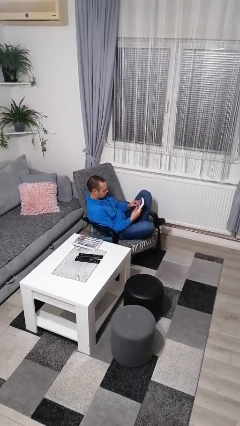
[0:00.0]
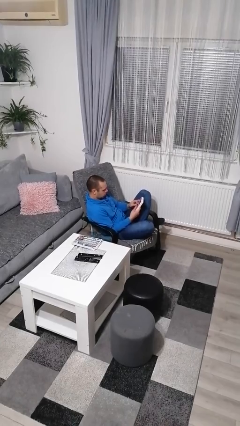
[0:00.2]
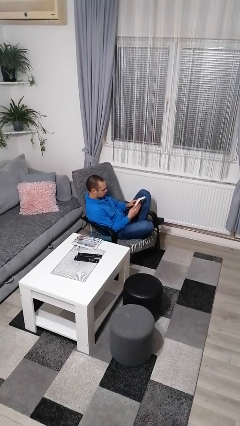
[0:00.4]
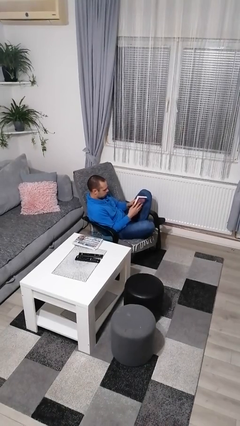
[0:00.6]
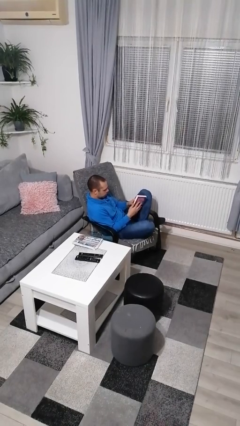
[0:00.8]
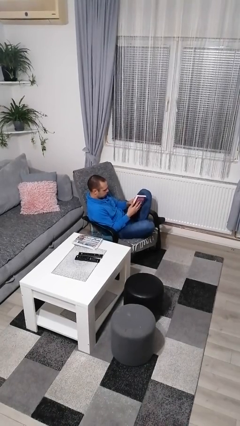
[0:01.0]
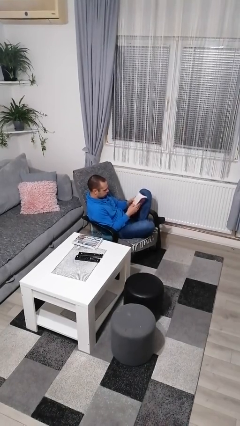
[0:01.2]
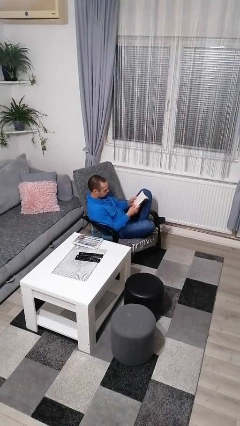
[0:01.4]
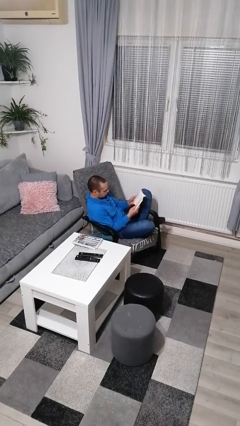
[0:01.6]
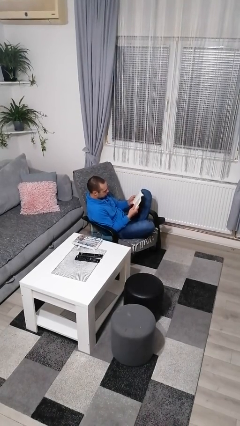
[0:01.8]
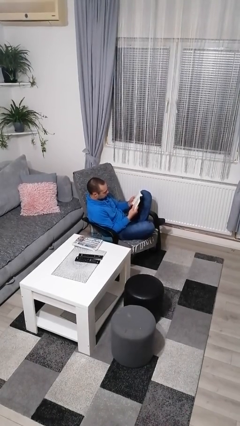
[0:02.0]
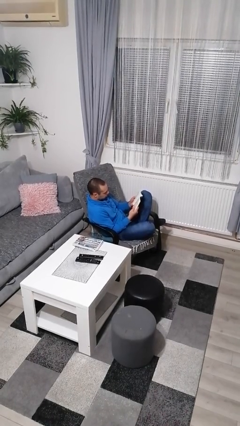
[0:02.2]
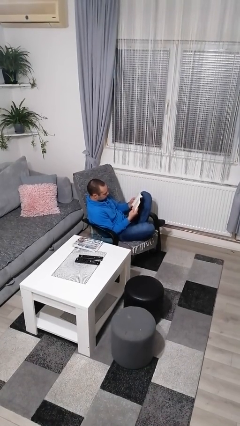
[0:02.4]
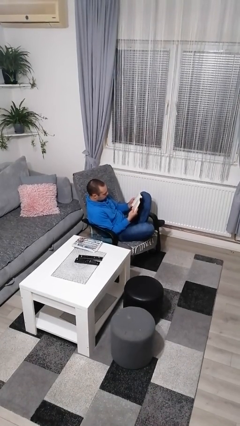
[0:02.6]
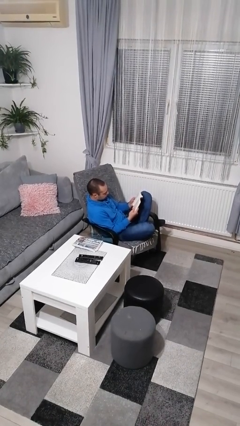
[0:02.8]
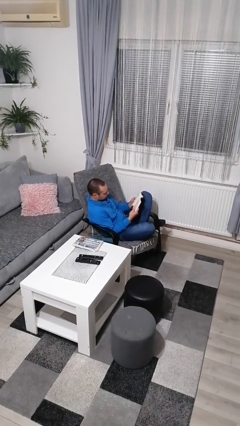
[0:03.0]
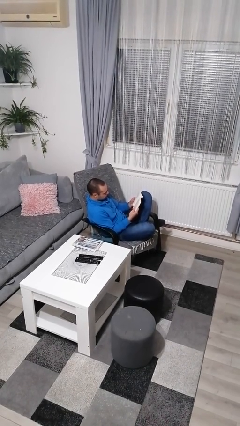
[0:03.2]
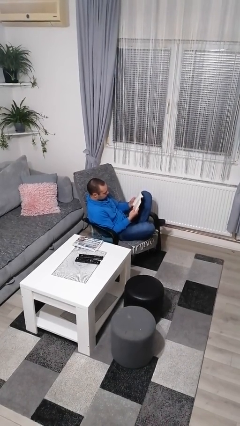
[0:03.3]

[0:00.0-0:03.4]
person reads book

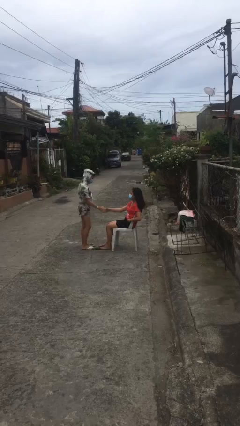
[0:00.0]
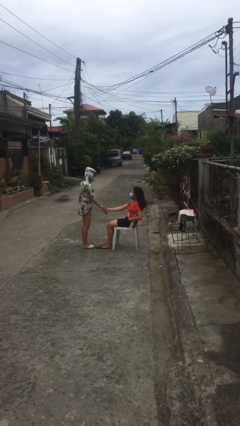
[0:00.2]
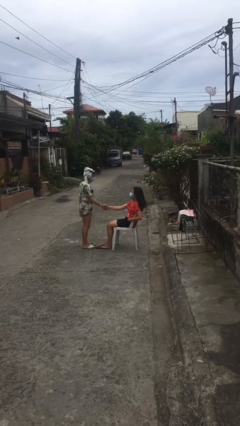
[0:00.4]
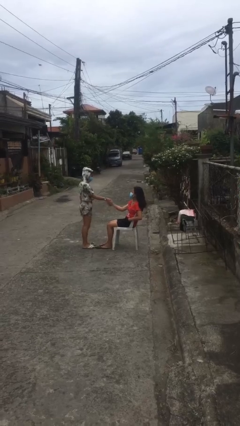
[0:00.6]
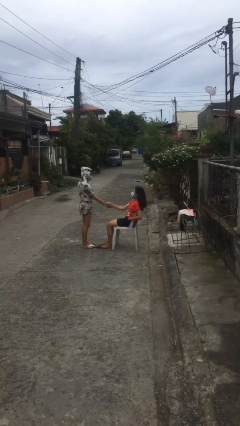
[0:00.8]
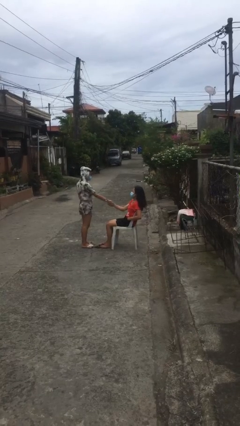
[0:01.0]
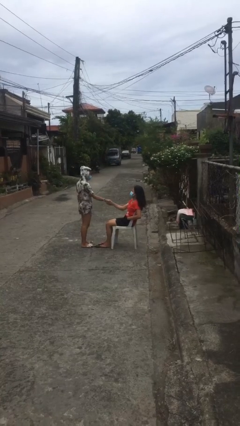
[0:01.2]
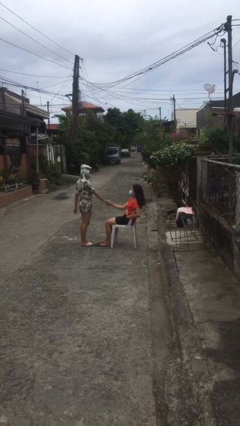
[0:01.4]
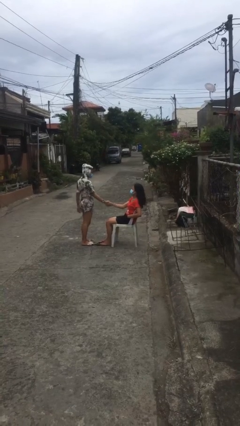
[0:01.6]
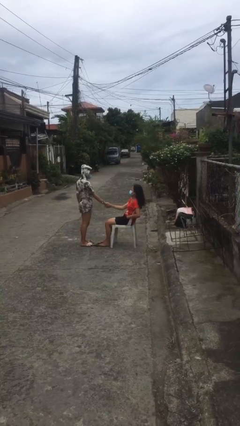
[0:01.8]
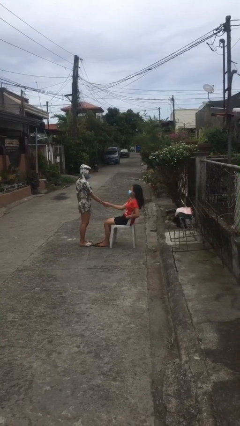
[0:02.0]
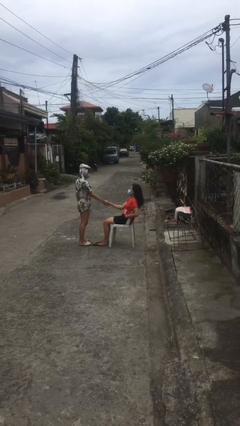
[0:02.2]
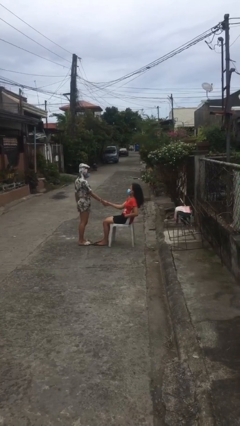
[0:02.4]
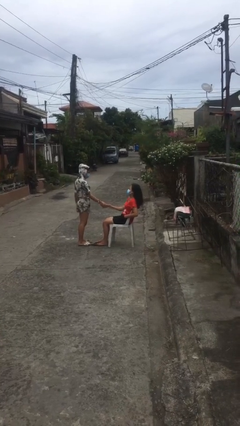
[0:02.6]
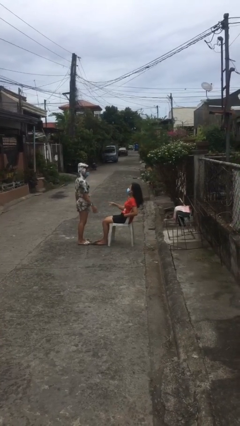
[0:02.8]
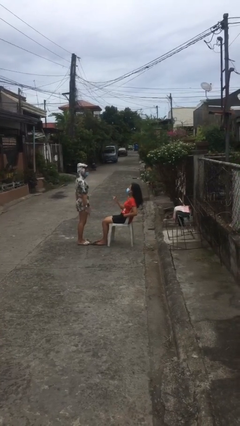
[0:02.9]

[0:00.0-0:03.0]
person shakes hand

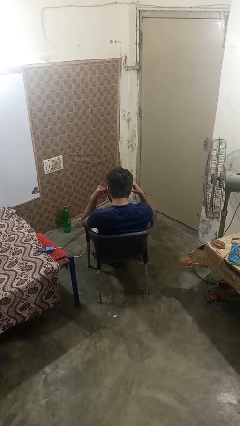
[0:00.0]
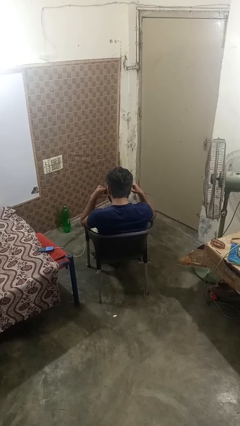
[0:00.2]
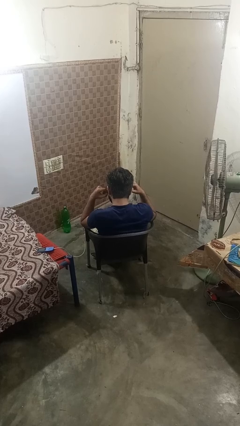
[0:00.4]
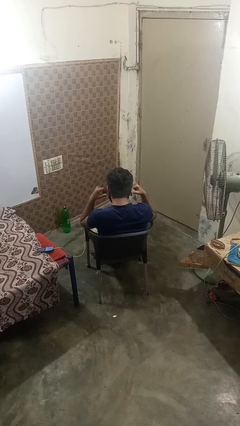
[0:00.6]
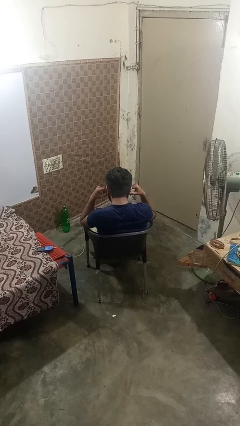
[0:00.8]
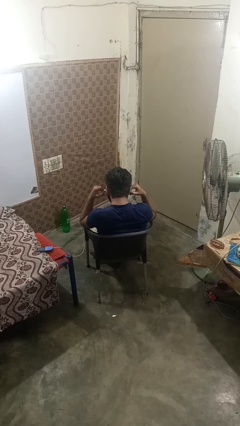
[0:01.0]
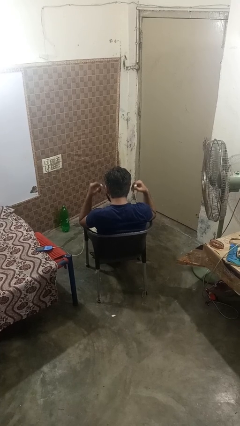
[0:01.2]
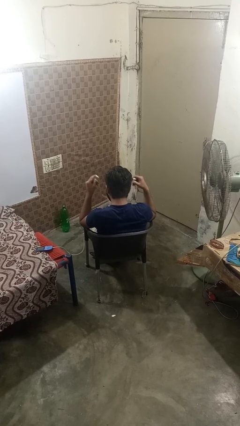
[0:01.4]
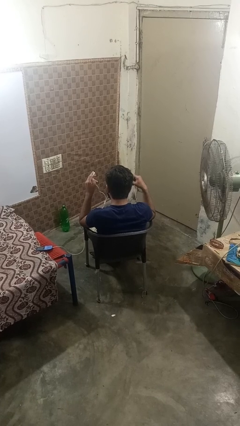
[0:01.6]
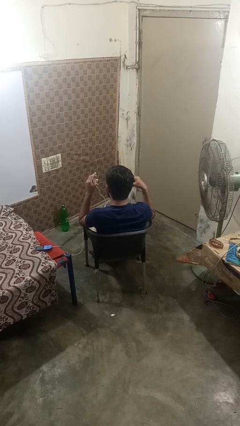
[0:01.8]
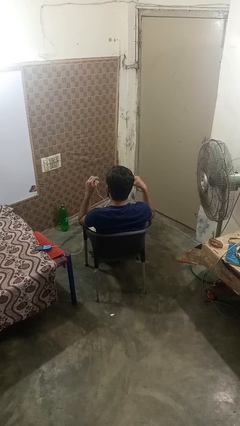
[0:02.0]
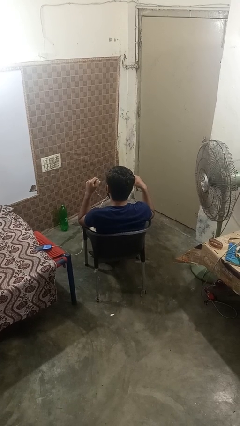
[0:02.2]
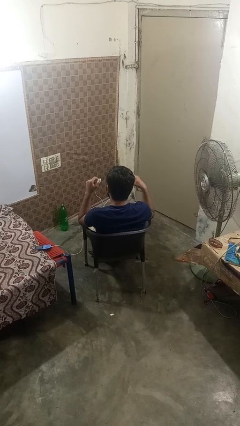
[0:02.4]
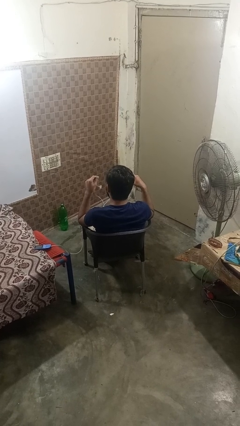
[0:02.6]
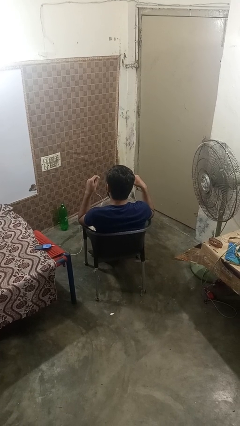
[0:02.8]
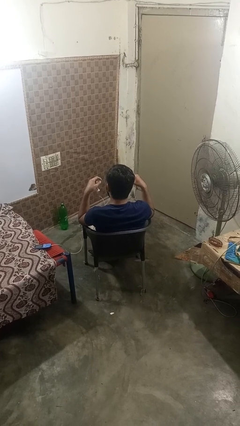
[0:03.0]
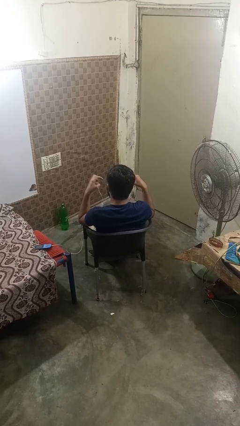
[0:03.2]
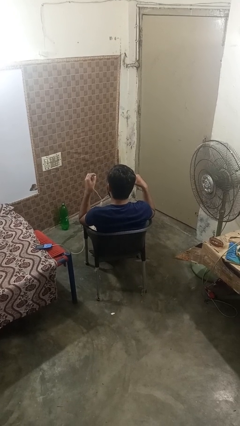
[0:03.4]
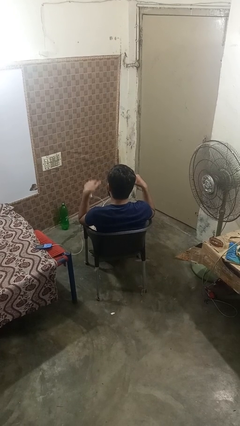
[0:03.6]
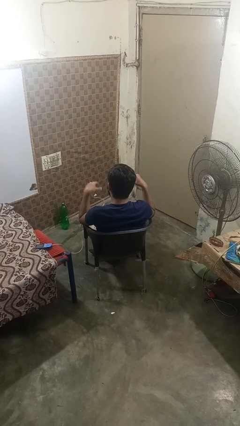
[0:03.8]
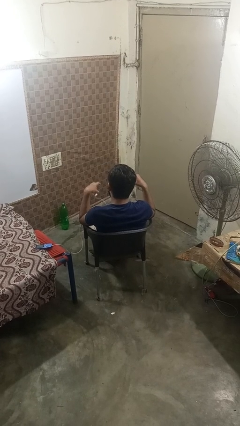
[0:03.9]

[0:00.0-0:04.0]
person takes off headphones

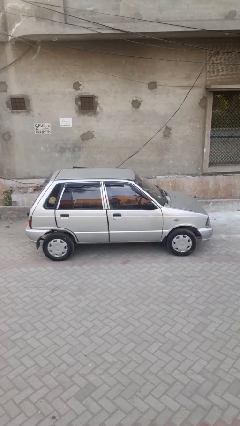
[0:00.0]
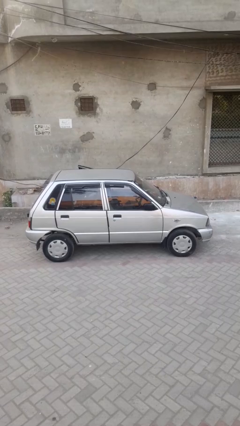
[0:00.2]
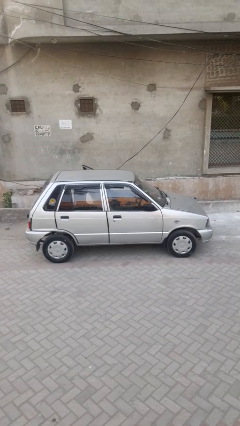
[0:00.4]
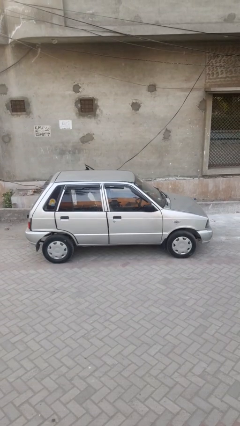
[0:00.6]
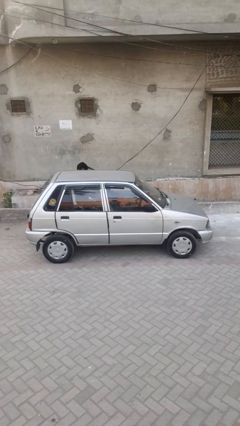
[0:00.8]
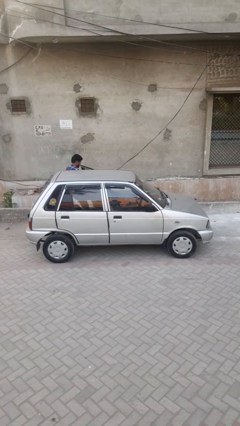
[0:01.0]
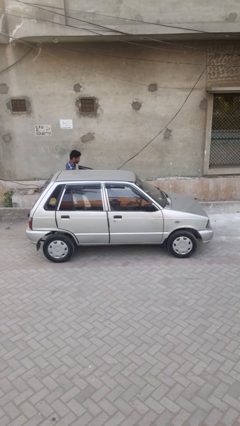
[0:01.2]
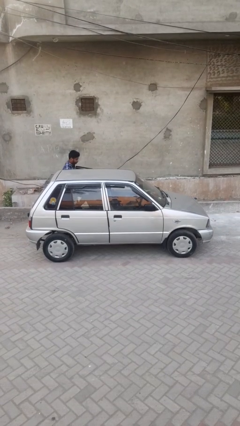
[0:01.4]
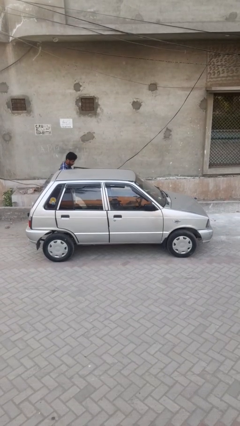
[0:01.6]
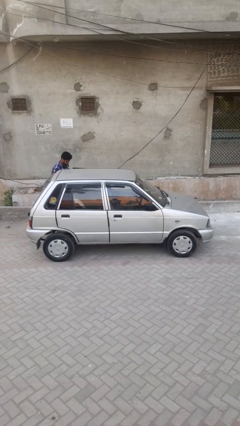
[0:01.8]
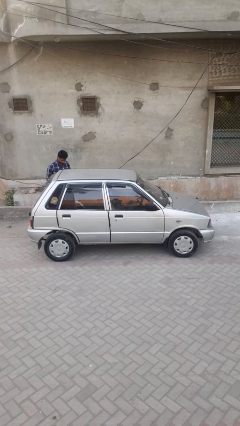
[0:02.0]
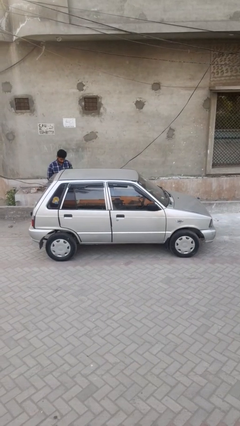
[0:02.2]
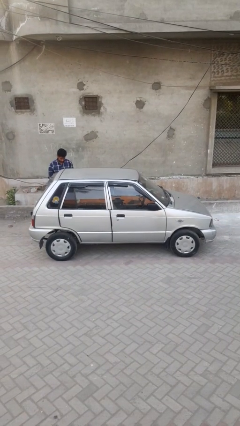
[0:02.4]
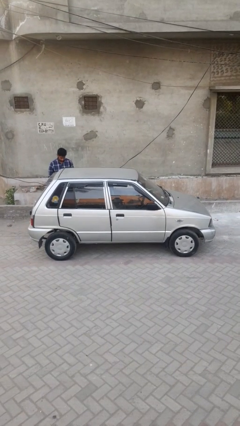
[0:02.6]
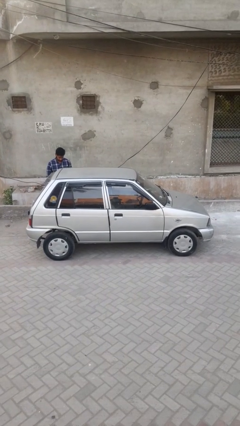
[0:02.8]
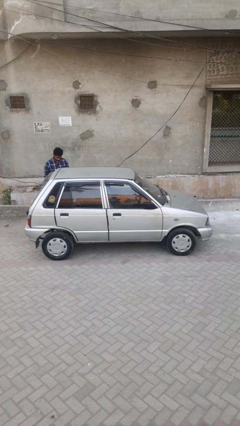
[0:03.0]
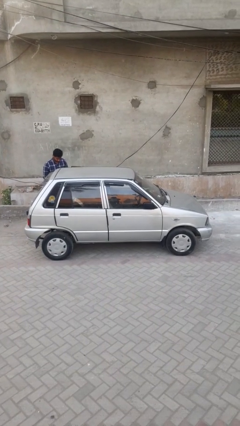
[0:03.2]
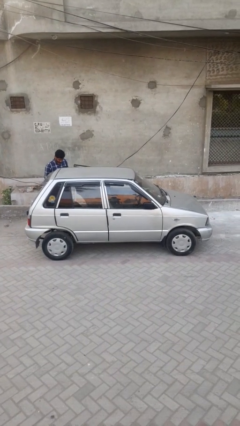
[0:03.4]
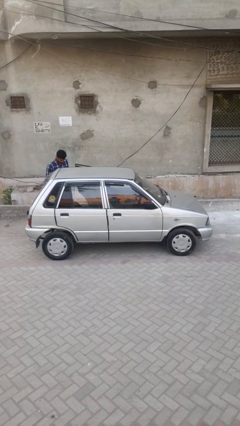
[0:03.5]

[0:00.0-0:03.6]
car drops off person

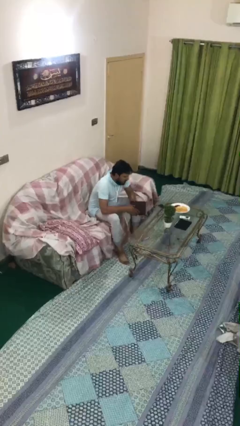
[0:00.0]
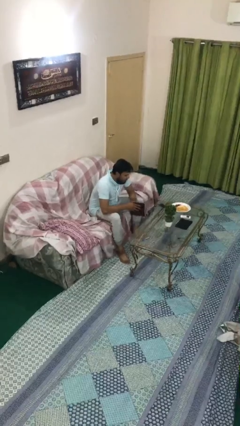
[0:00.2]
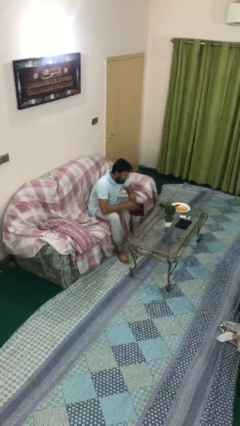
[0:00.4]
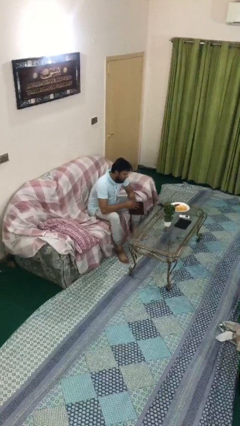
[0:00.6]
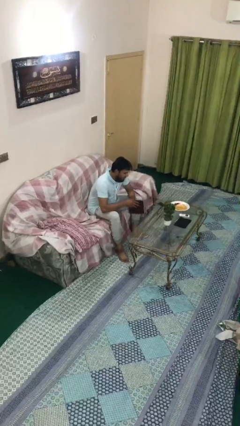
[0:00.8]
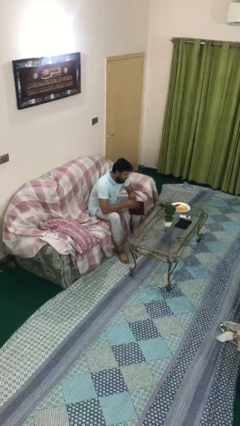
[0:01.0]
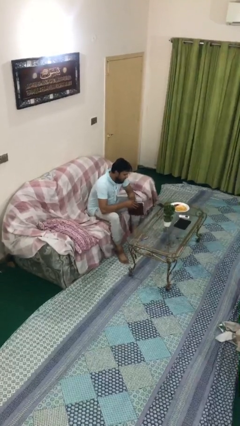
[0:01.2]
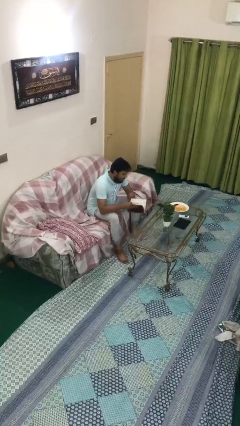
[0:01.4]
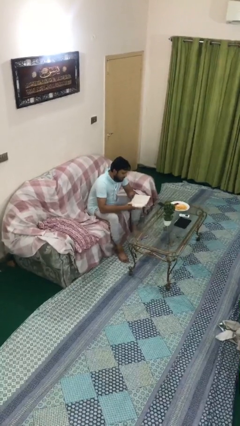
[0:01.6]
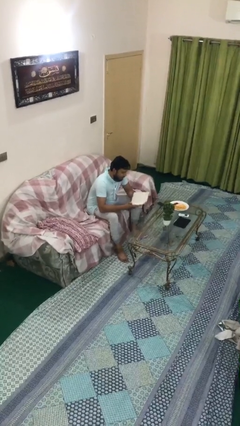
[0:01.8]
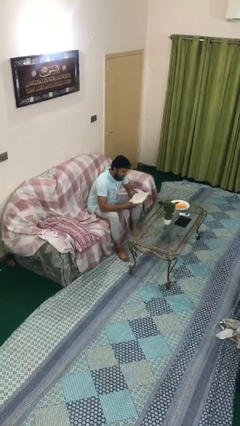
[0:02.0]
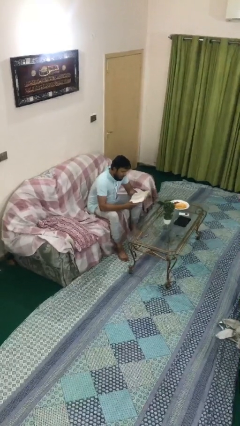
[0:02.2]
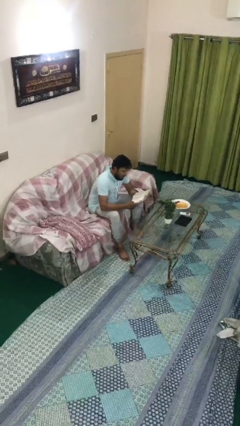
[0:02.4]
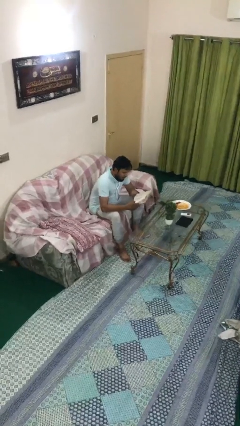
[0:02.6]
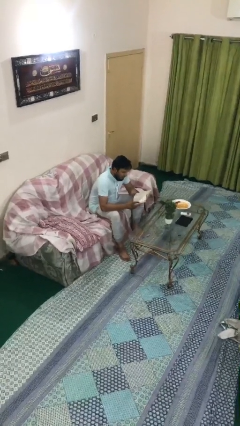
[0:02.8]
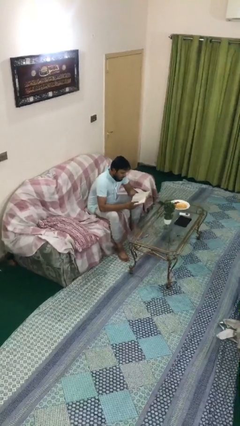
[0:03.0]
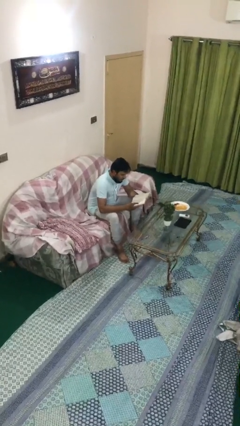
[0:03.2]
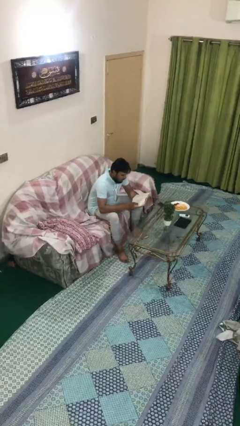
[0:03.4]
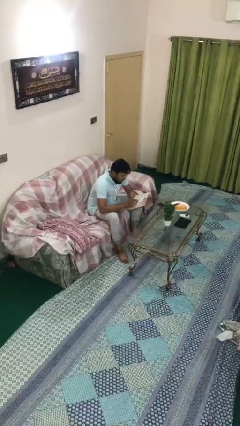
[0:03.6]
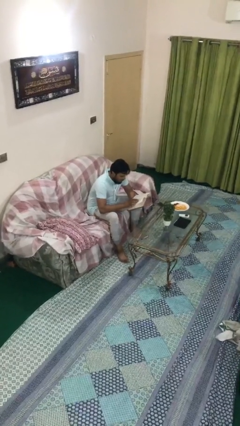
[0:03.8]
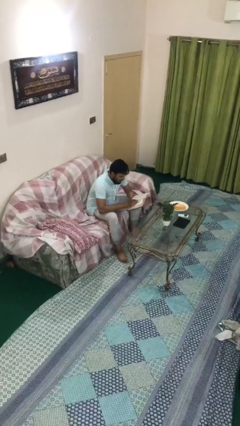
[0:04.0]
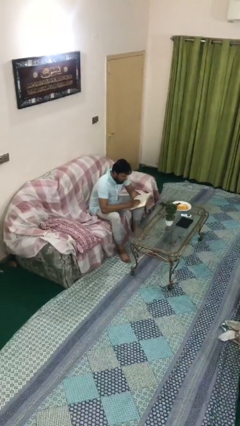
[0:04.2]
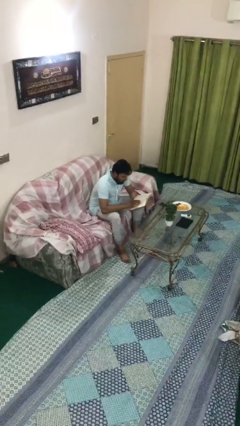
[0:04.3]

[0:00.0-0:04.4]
person reads document
